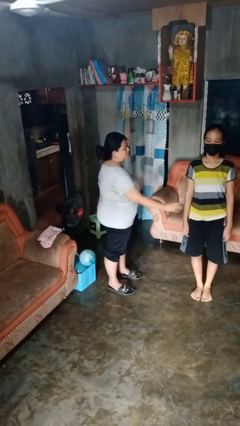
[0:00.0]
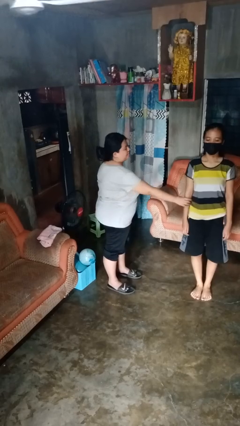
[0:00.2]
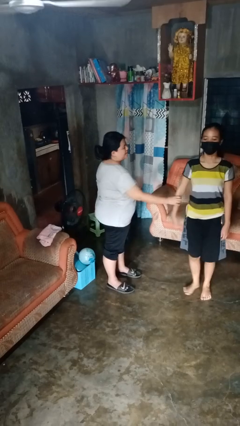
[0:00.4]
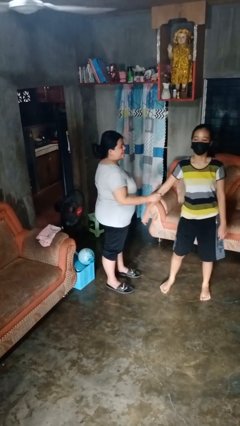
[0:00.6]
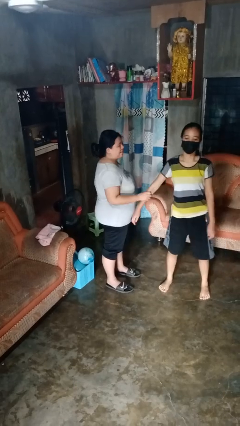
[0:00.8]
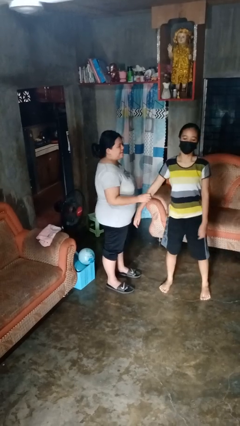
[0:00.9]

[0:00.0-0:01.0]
person grabs person by forearm

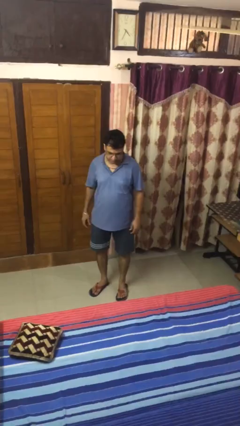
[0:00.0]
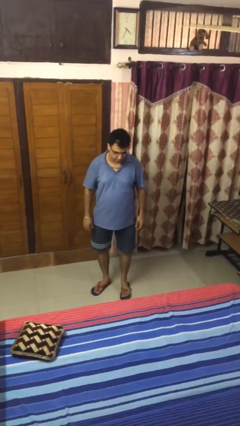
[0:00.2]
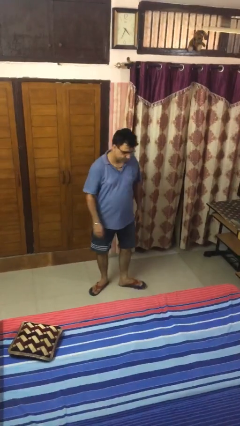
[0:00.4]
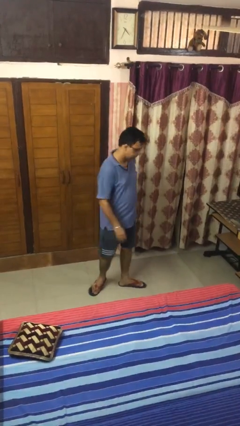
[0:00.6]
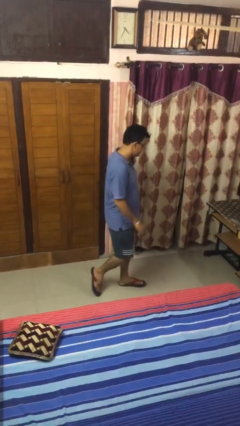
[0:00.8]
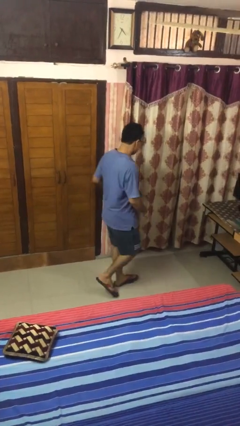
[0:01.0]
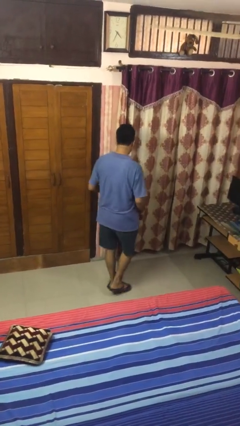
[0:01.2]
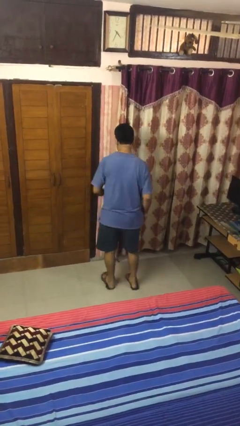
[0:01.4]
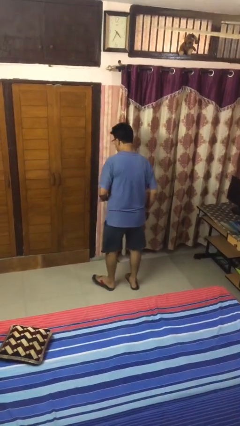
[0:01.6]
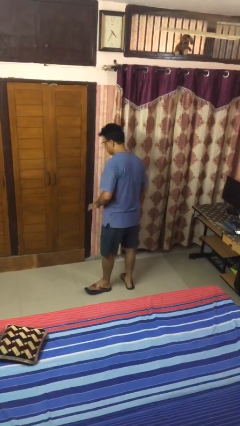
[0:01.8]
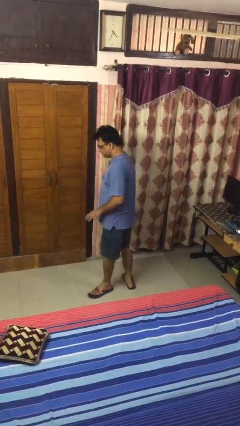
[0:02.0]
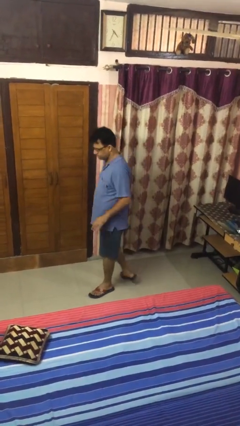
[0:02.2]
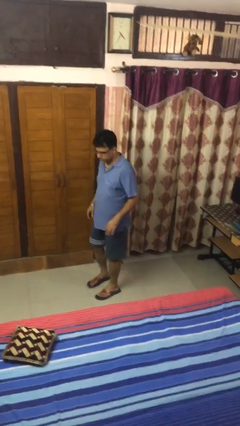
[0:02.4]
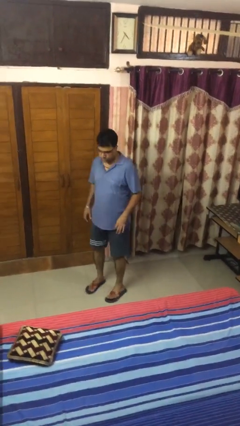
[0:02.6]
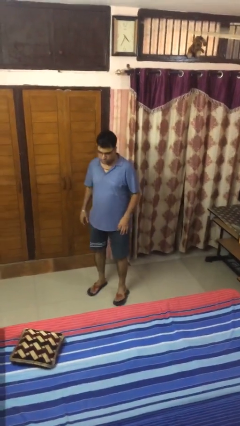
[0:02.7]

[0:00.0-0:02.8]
person twirls

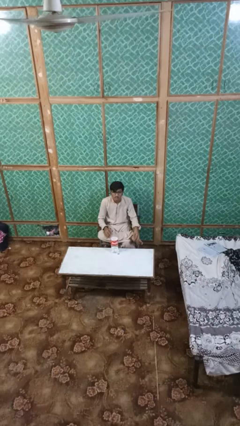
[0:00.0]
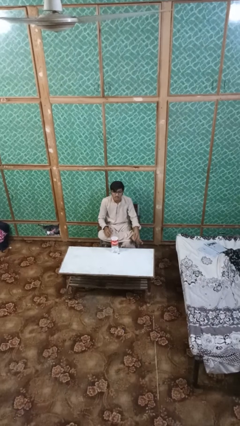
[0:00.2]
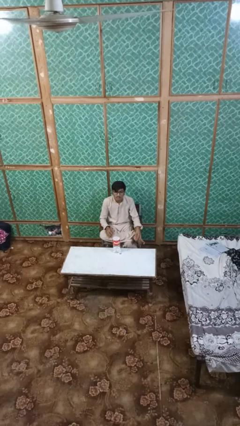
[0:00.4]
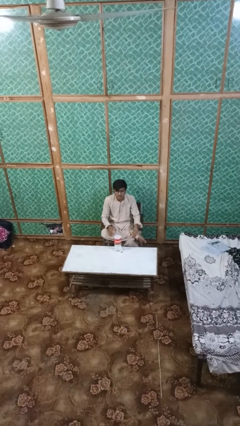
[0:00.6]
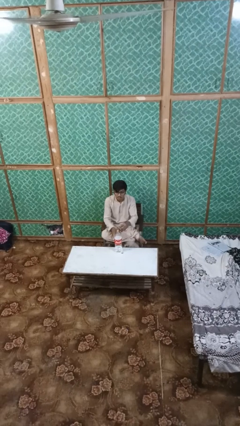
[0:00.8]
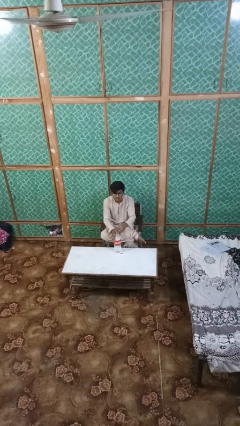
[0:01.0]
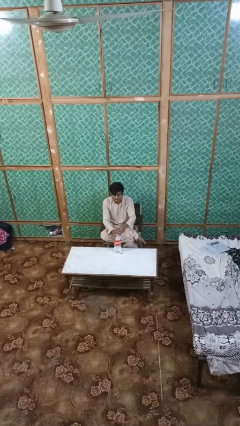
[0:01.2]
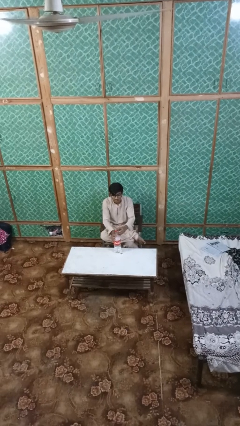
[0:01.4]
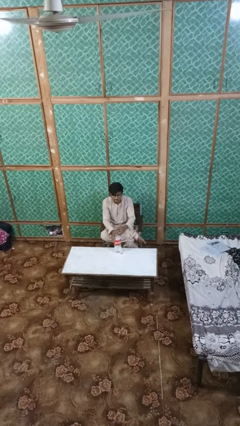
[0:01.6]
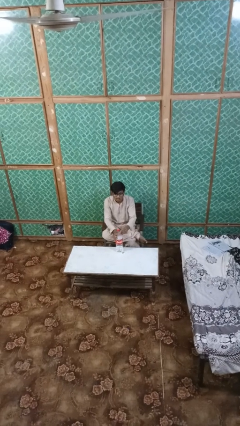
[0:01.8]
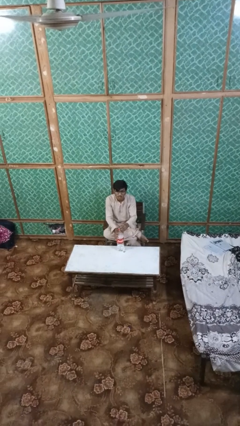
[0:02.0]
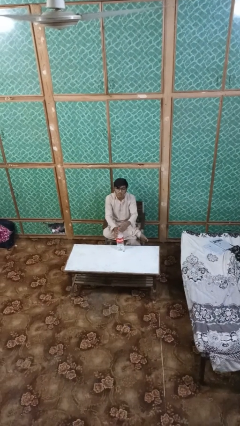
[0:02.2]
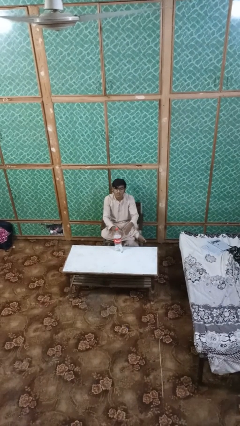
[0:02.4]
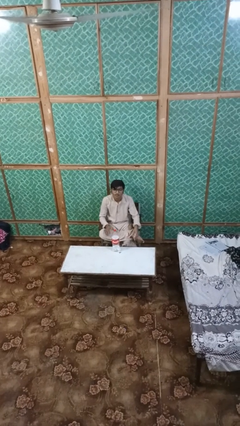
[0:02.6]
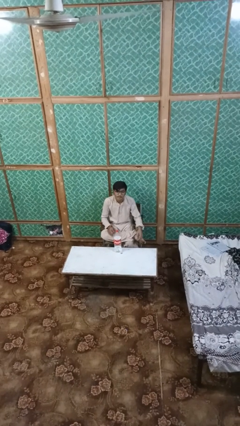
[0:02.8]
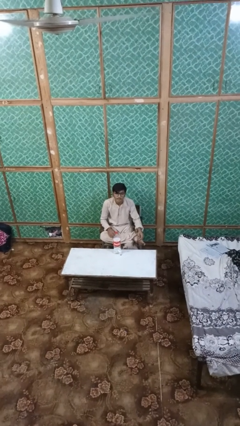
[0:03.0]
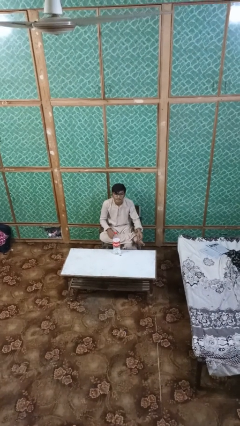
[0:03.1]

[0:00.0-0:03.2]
person screws lid to bottle

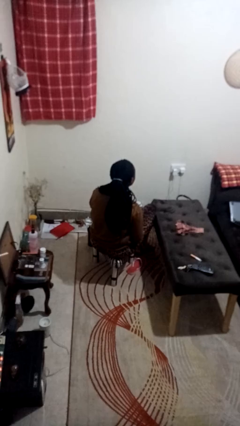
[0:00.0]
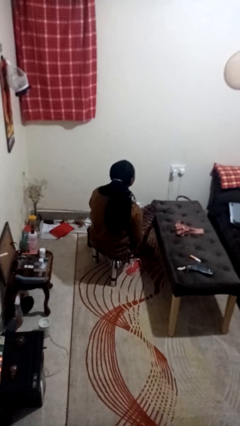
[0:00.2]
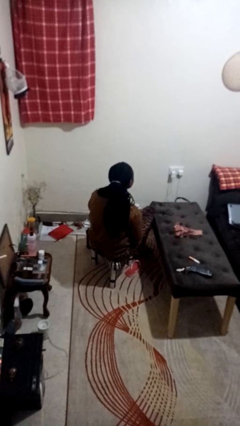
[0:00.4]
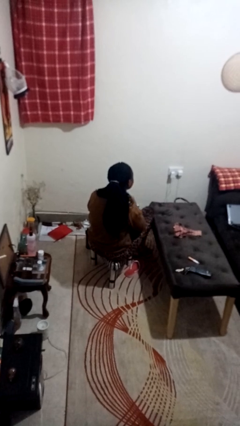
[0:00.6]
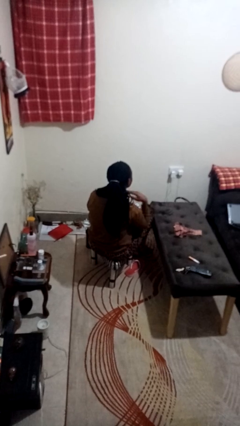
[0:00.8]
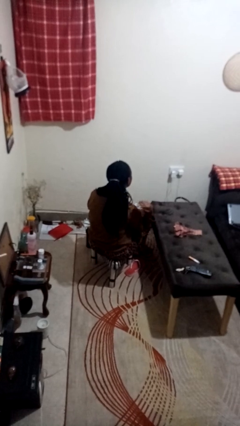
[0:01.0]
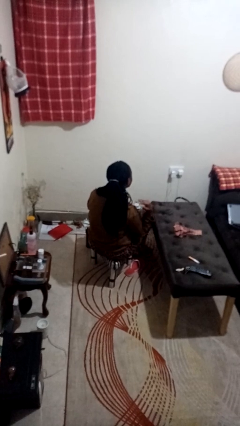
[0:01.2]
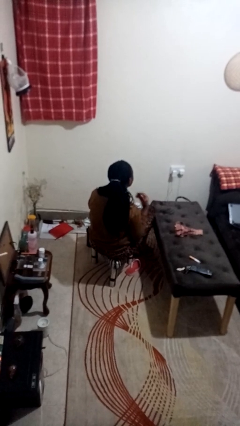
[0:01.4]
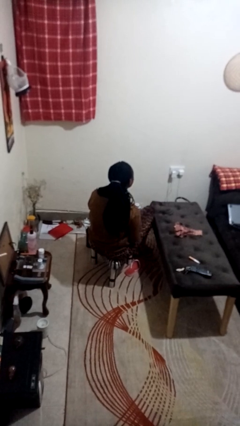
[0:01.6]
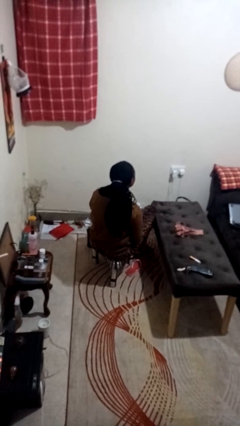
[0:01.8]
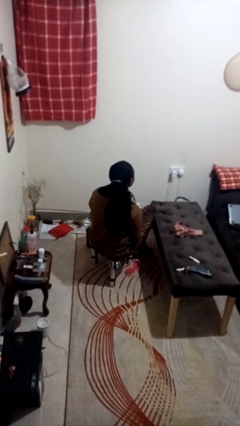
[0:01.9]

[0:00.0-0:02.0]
person gestures cut

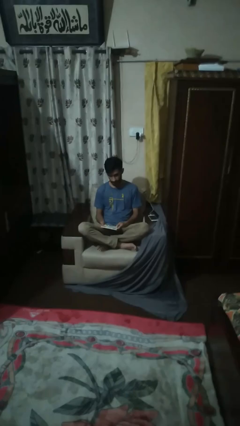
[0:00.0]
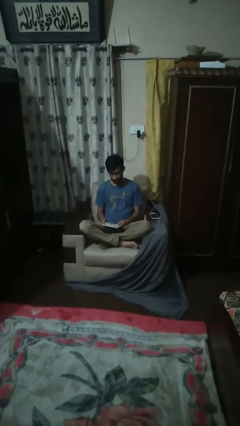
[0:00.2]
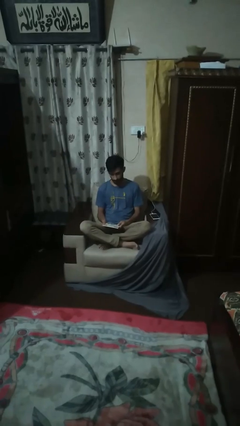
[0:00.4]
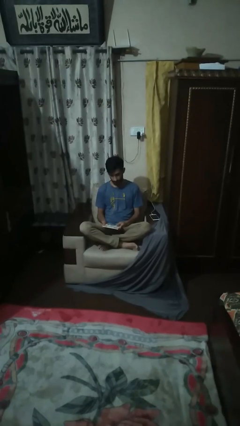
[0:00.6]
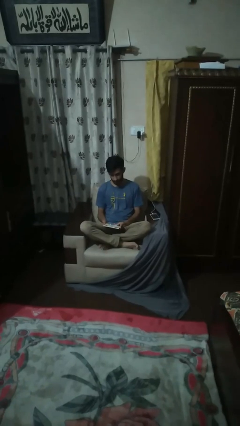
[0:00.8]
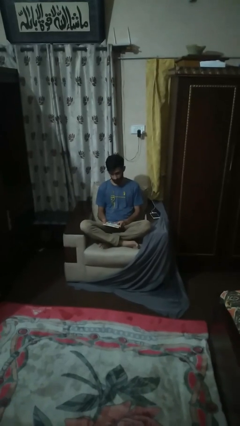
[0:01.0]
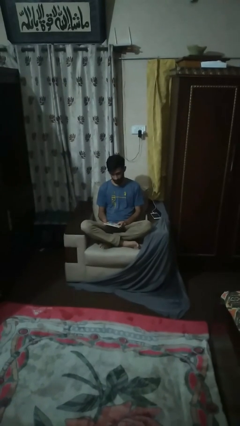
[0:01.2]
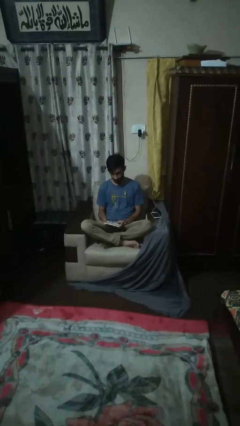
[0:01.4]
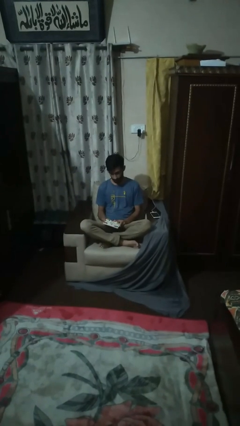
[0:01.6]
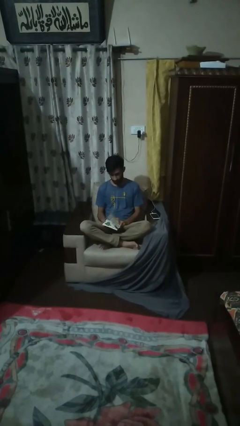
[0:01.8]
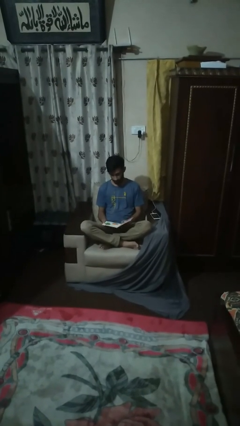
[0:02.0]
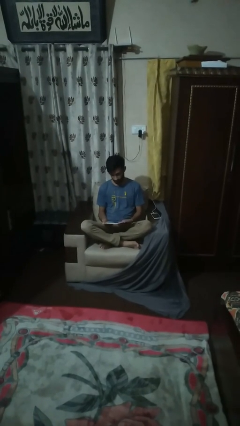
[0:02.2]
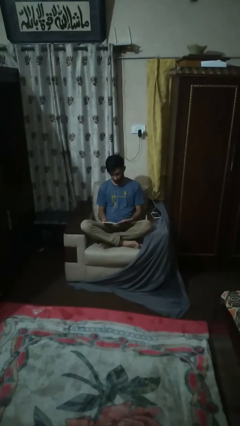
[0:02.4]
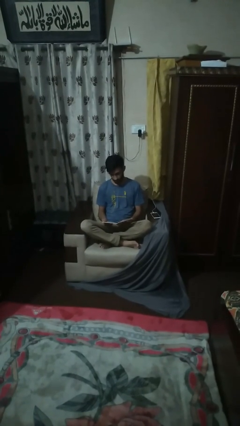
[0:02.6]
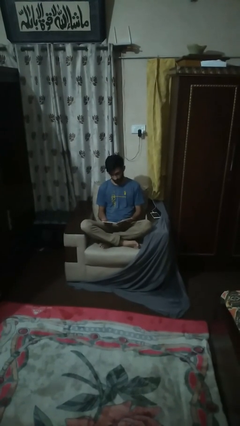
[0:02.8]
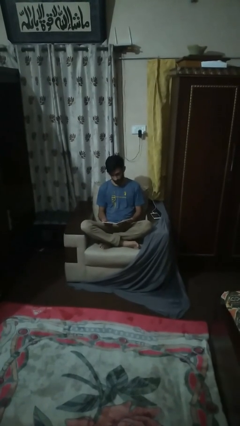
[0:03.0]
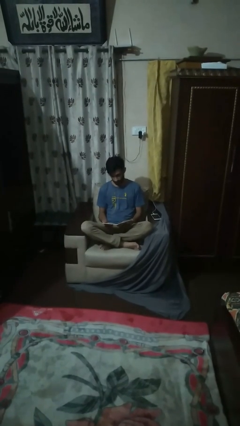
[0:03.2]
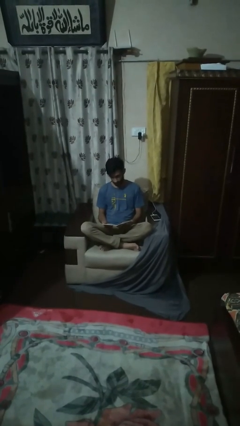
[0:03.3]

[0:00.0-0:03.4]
person reads book

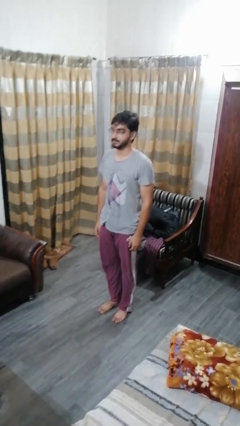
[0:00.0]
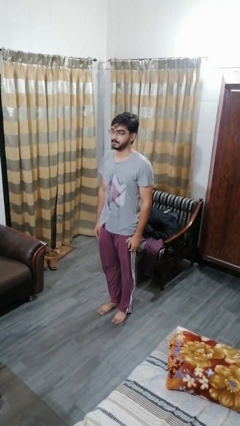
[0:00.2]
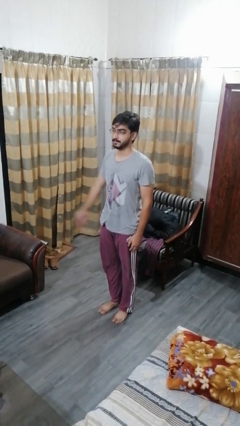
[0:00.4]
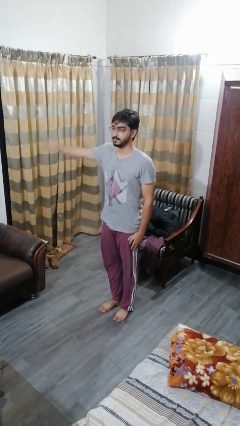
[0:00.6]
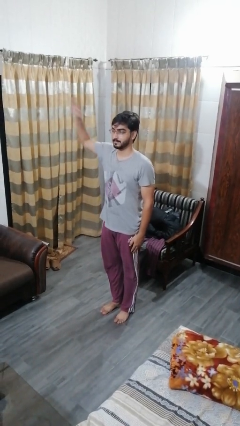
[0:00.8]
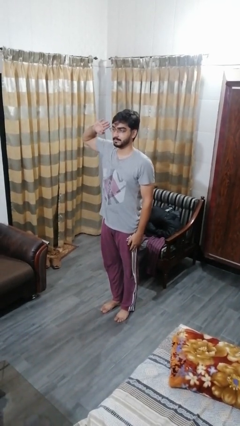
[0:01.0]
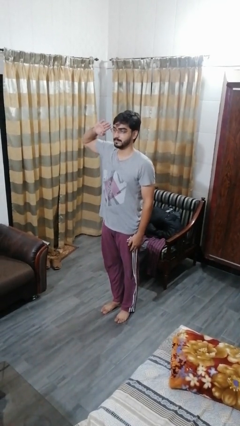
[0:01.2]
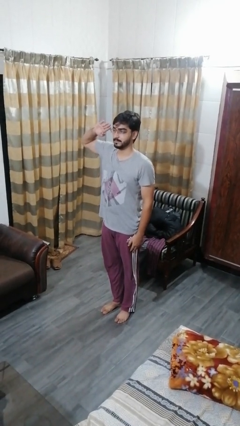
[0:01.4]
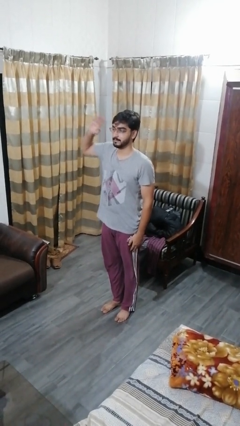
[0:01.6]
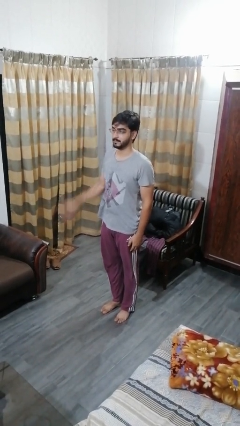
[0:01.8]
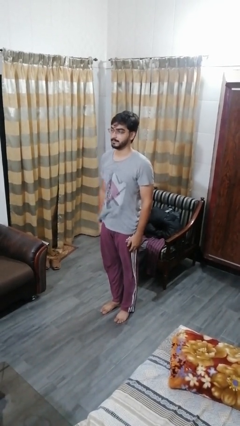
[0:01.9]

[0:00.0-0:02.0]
person salutes

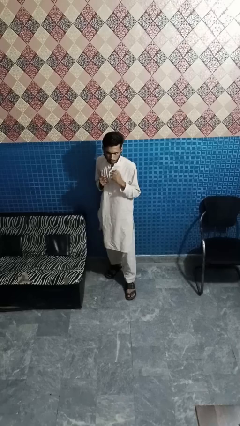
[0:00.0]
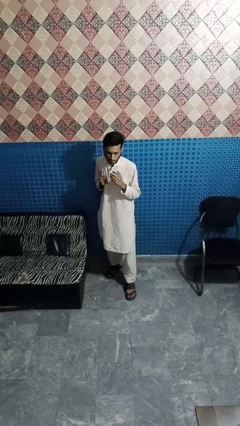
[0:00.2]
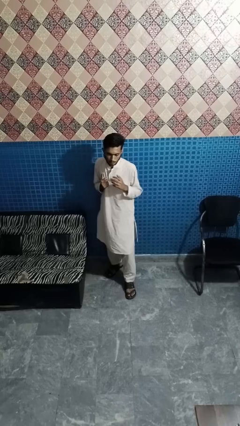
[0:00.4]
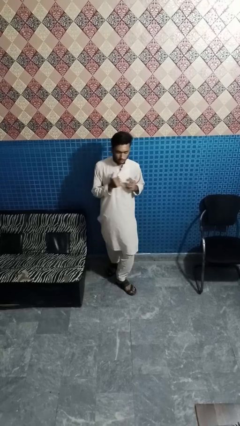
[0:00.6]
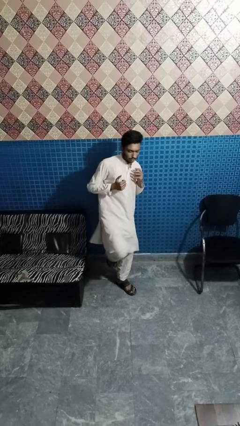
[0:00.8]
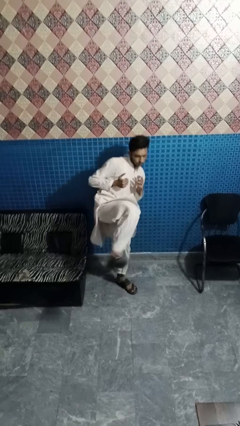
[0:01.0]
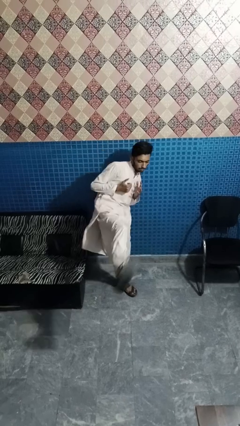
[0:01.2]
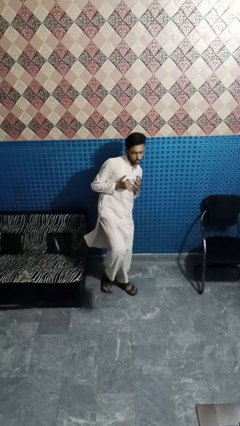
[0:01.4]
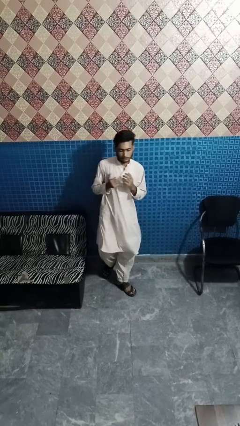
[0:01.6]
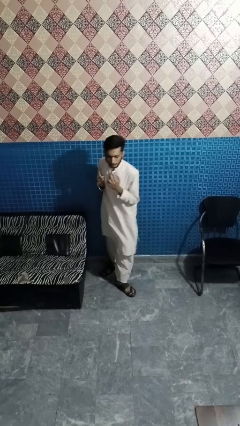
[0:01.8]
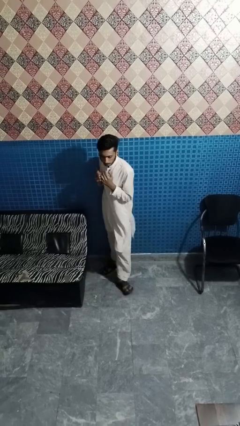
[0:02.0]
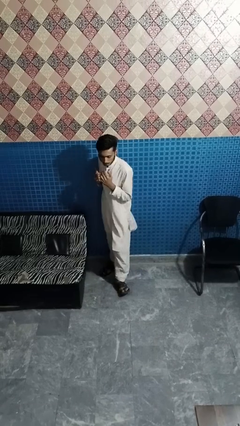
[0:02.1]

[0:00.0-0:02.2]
person karate kicks

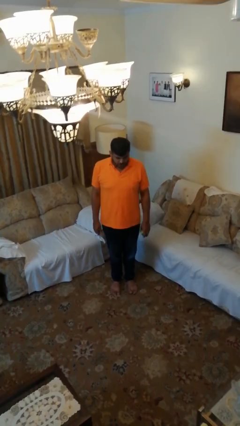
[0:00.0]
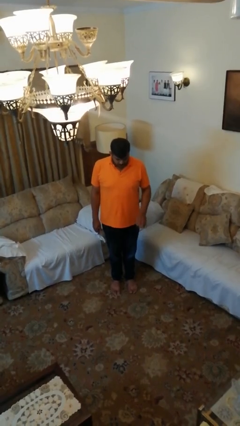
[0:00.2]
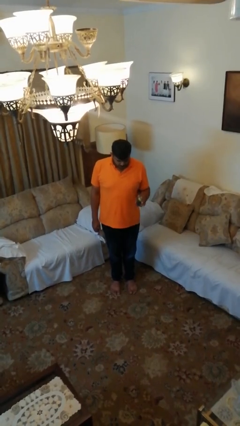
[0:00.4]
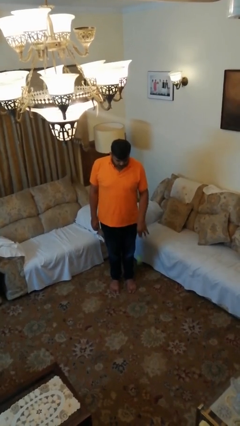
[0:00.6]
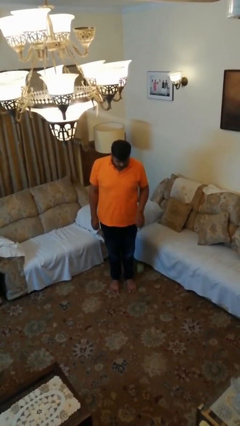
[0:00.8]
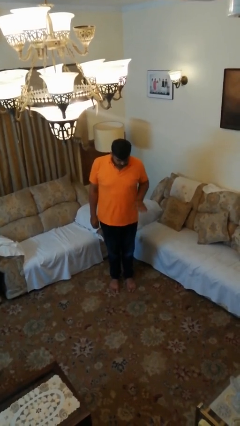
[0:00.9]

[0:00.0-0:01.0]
person bounces ball on floor
